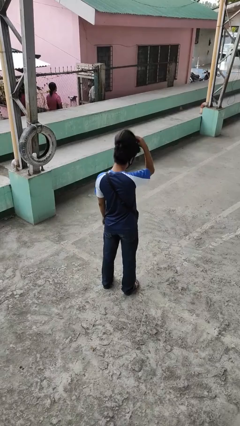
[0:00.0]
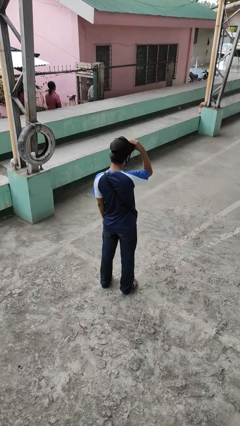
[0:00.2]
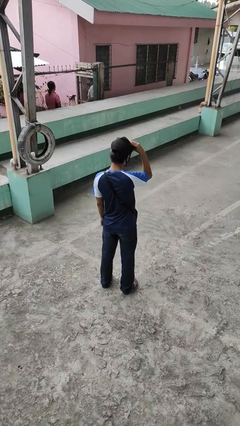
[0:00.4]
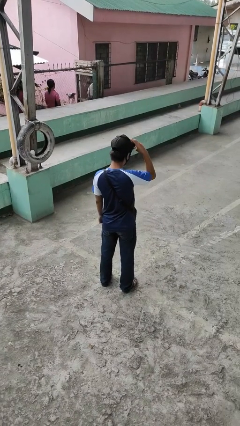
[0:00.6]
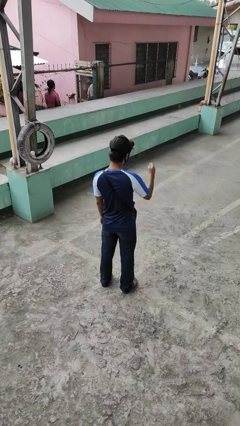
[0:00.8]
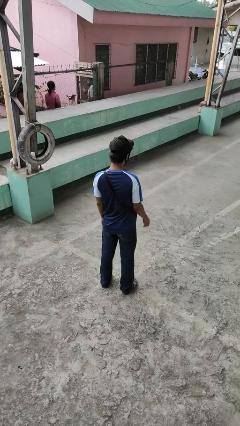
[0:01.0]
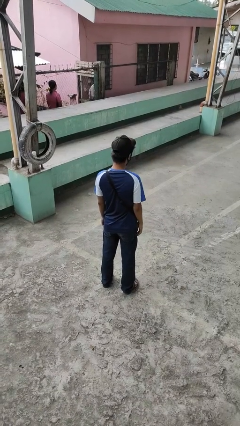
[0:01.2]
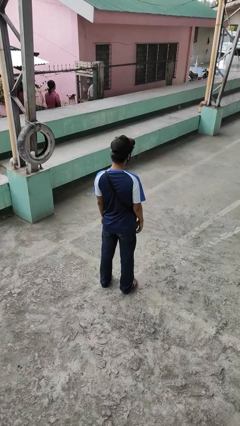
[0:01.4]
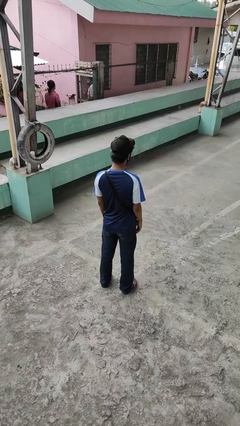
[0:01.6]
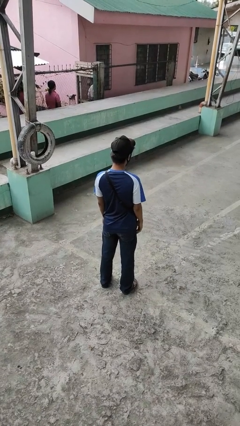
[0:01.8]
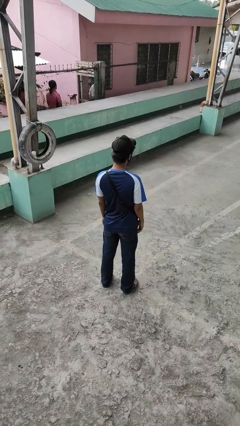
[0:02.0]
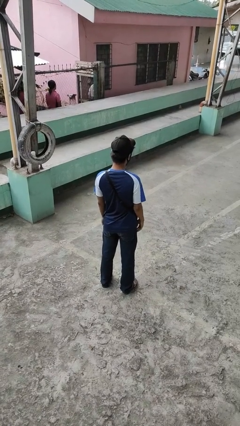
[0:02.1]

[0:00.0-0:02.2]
person puts on hat

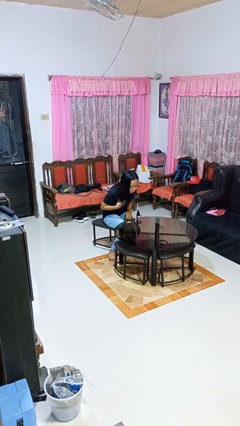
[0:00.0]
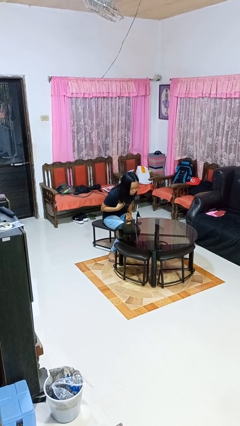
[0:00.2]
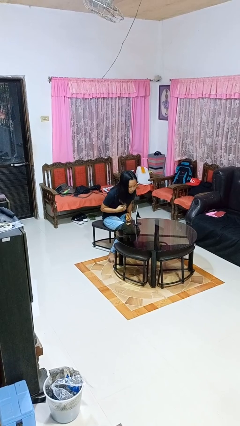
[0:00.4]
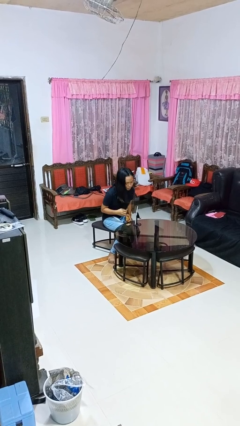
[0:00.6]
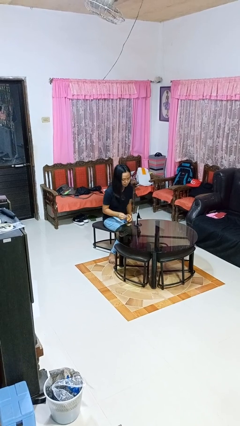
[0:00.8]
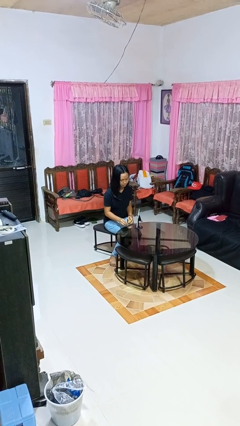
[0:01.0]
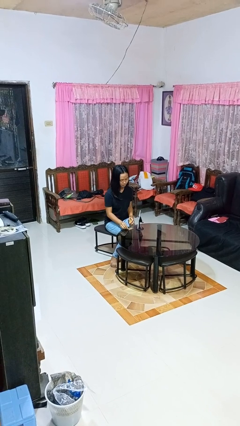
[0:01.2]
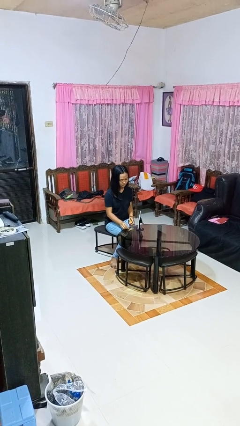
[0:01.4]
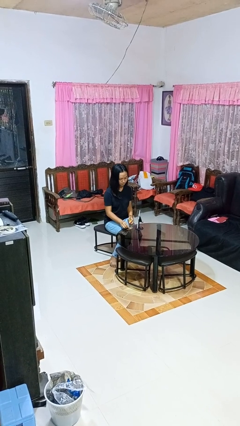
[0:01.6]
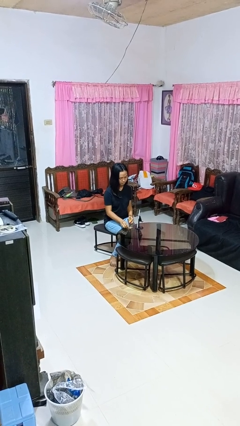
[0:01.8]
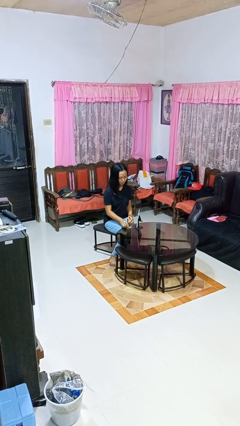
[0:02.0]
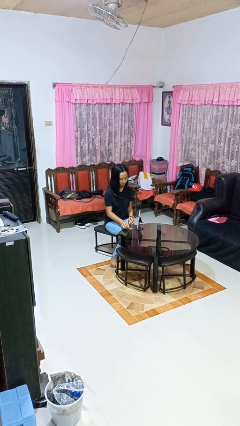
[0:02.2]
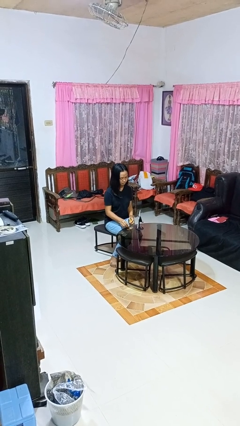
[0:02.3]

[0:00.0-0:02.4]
person extinguishes candle

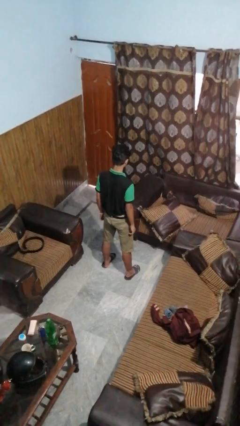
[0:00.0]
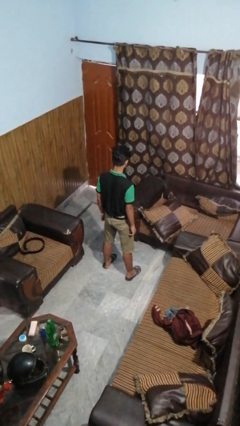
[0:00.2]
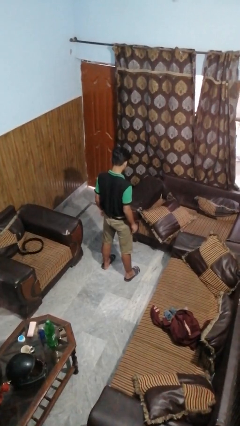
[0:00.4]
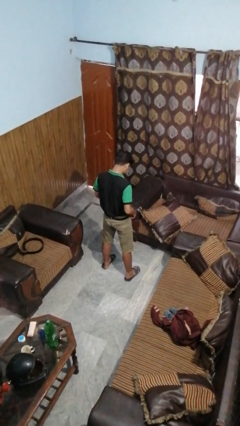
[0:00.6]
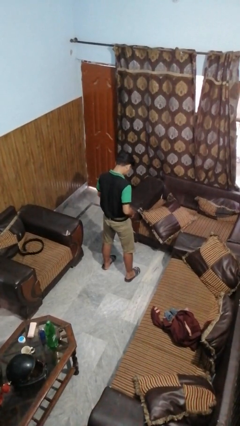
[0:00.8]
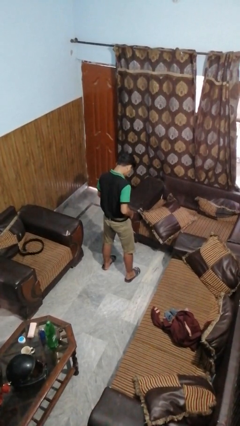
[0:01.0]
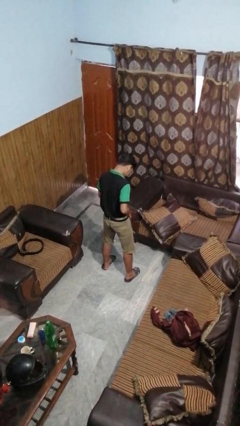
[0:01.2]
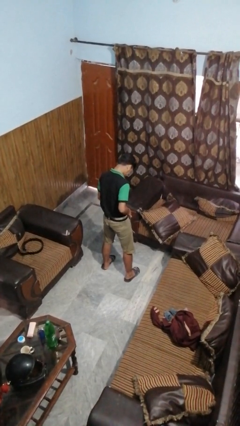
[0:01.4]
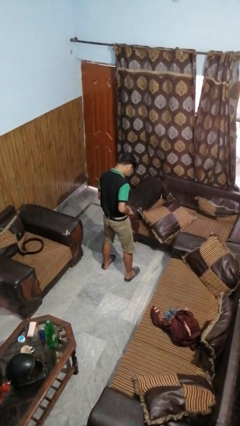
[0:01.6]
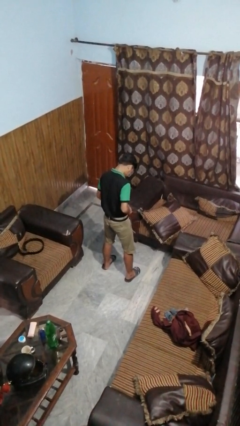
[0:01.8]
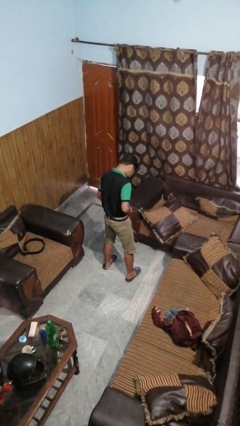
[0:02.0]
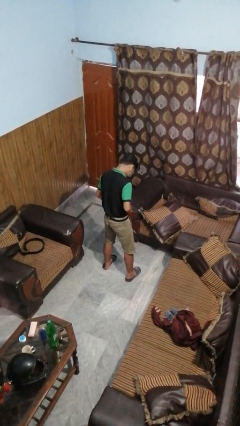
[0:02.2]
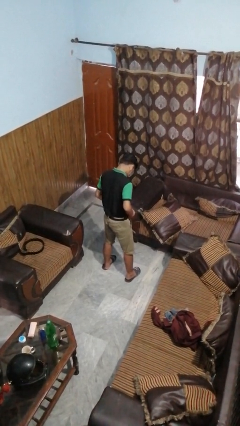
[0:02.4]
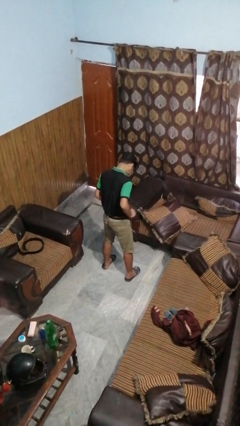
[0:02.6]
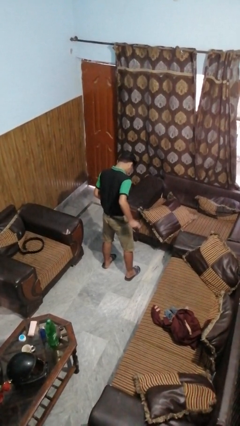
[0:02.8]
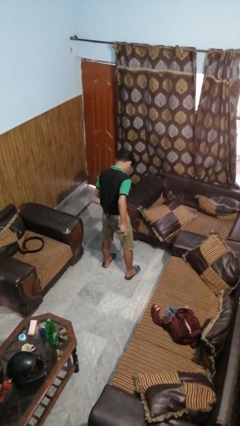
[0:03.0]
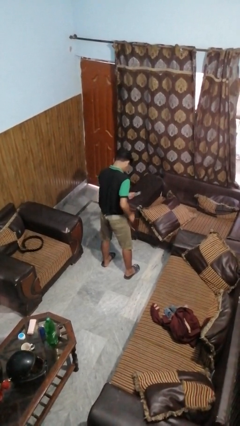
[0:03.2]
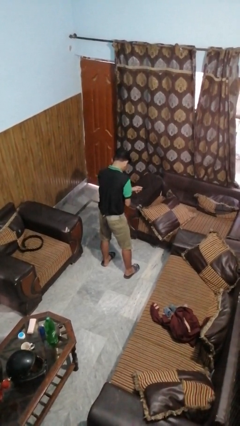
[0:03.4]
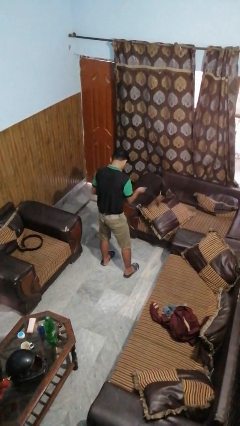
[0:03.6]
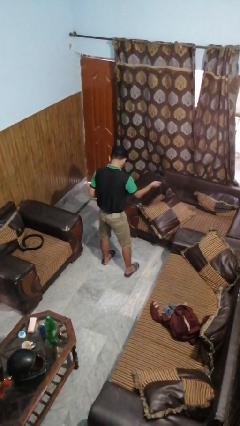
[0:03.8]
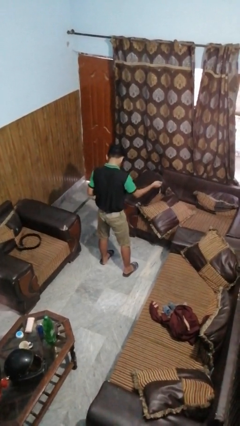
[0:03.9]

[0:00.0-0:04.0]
person takes off belt

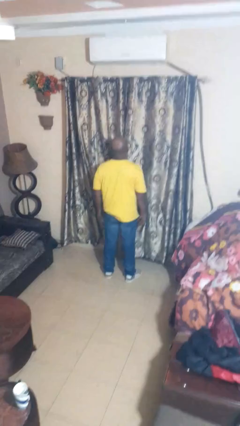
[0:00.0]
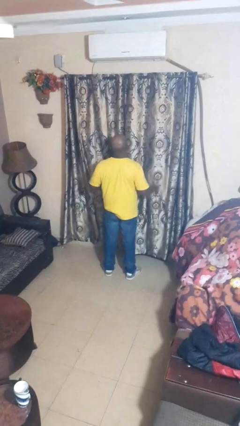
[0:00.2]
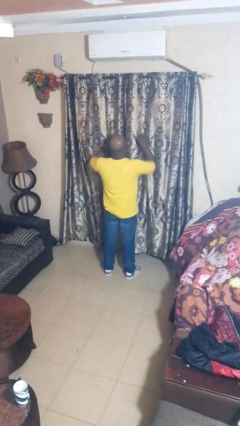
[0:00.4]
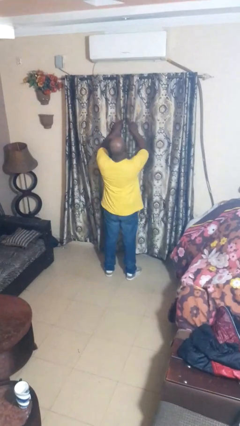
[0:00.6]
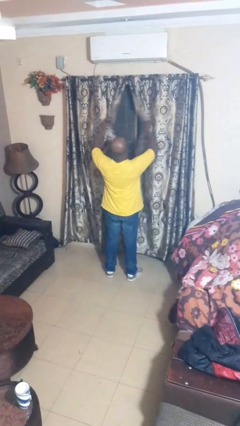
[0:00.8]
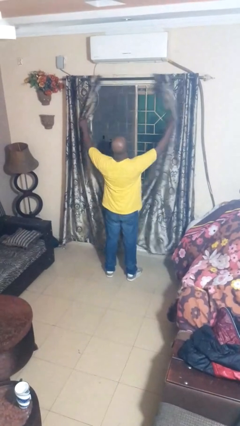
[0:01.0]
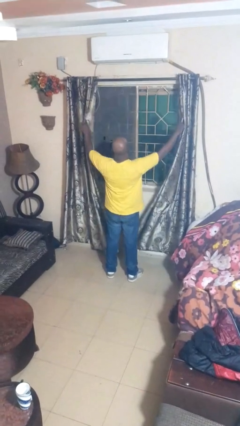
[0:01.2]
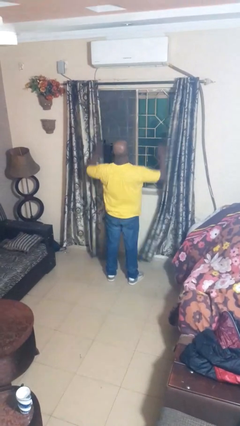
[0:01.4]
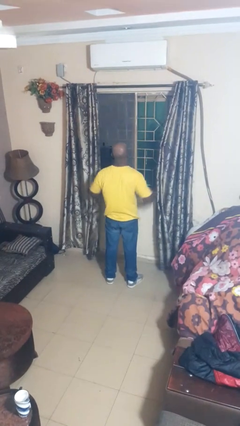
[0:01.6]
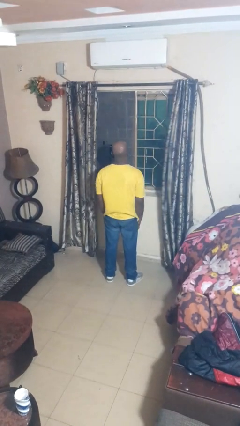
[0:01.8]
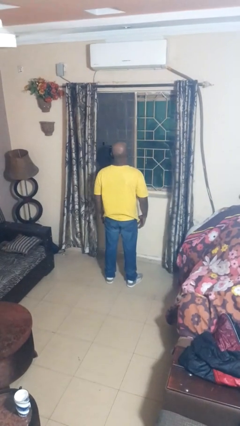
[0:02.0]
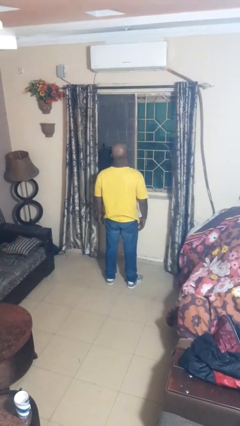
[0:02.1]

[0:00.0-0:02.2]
person opens curtains

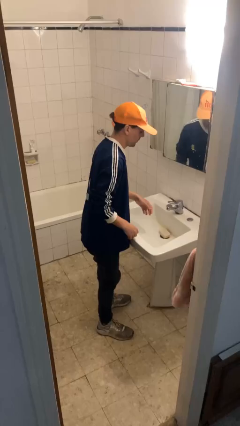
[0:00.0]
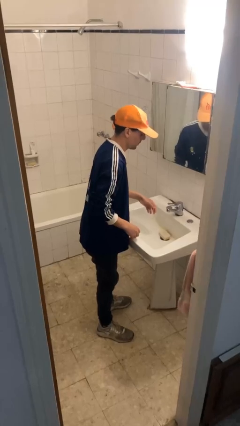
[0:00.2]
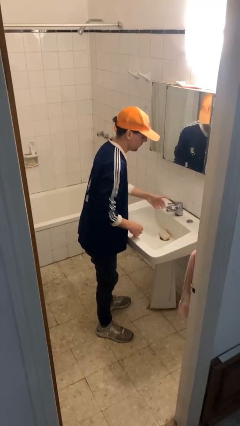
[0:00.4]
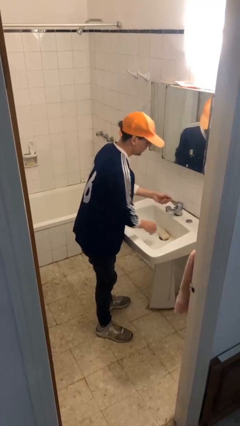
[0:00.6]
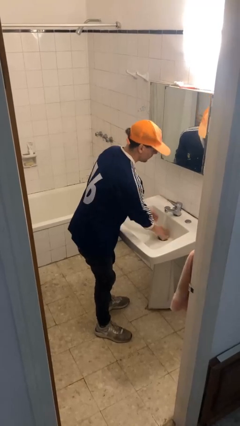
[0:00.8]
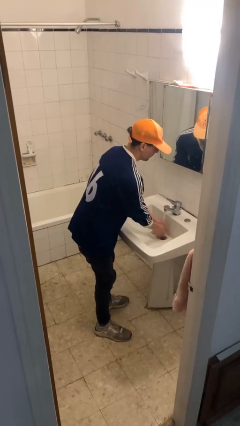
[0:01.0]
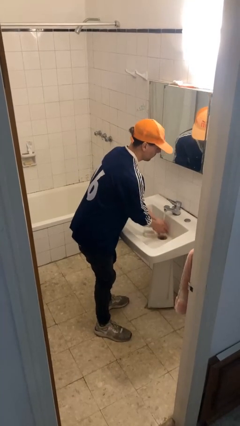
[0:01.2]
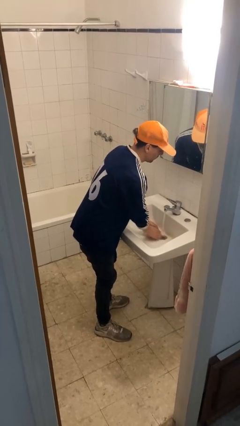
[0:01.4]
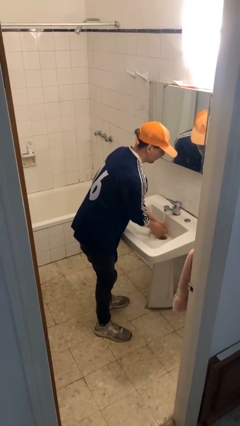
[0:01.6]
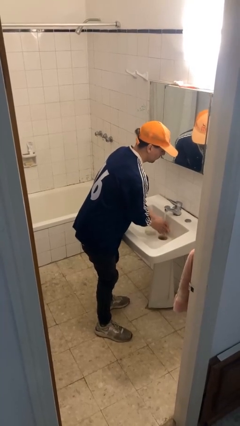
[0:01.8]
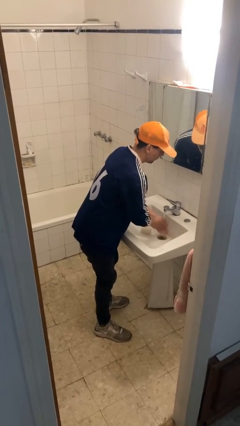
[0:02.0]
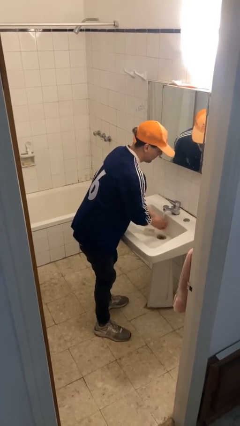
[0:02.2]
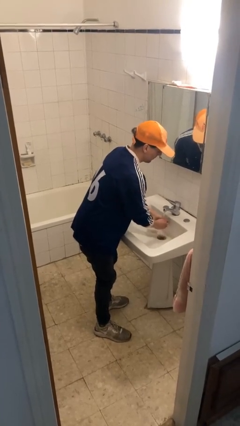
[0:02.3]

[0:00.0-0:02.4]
person washes hands

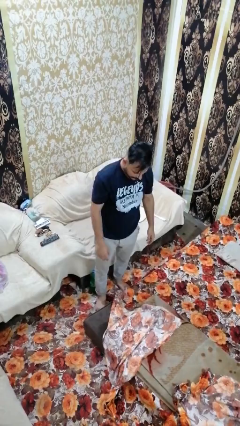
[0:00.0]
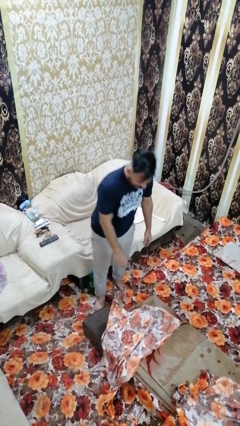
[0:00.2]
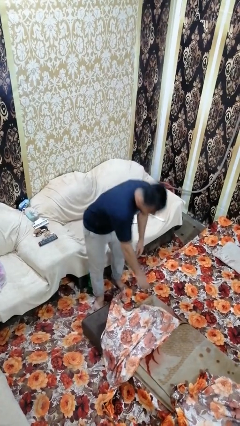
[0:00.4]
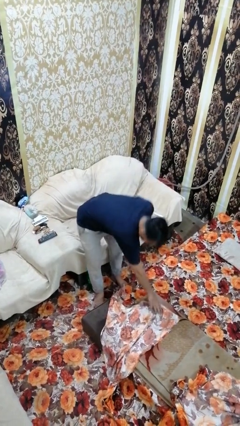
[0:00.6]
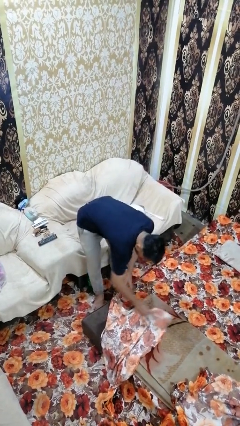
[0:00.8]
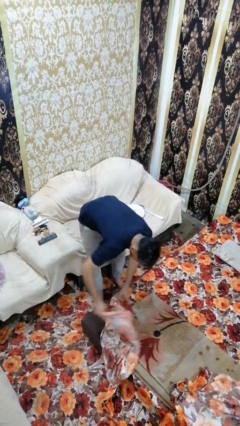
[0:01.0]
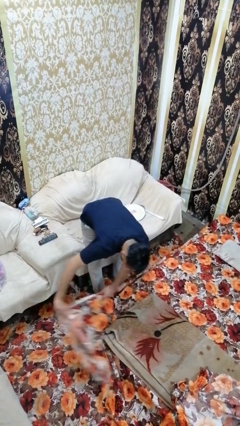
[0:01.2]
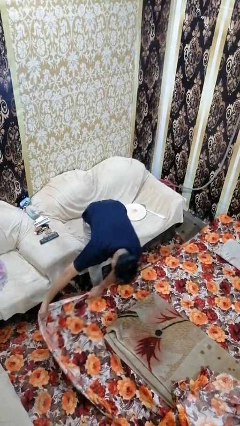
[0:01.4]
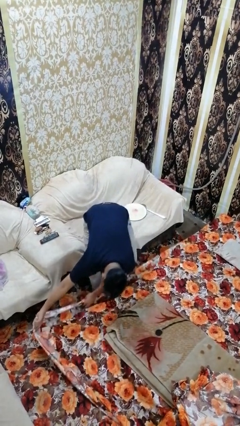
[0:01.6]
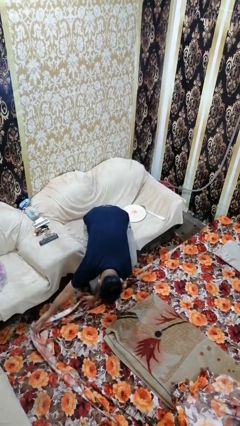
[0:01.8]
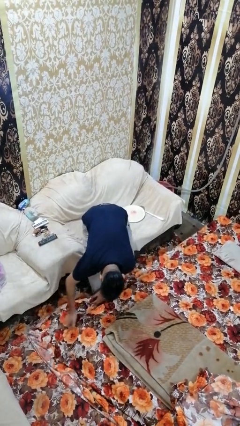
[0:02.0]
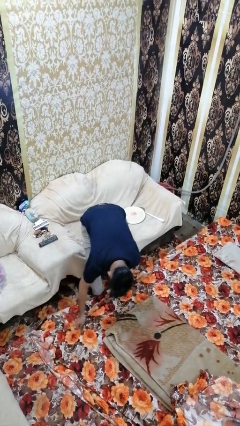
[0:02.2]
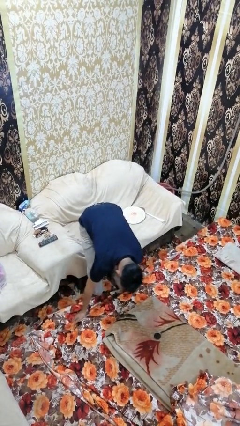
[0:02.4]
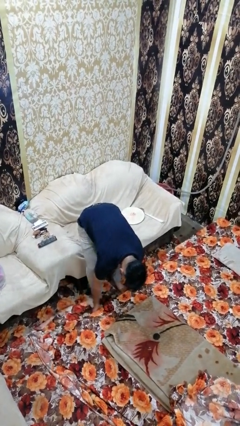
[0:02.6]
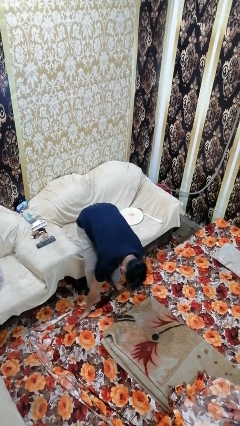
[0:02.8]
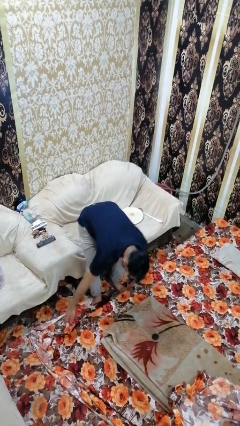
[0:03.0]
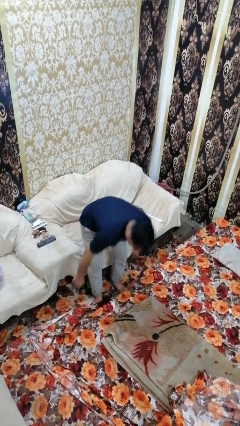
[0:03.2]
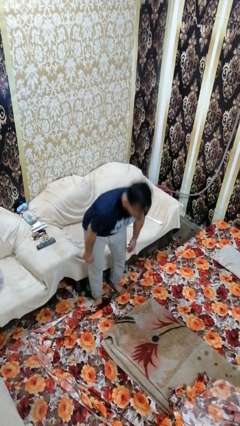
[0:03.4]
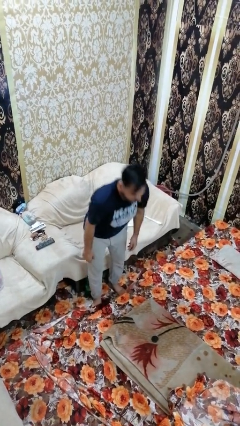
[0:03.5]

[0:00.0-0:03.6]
person makes bed

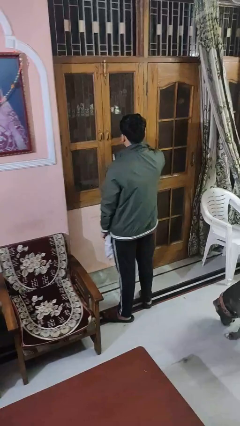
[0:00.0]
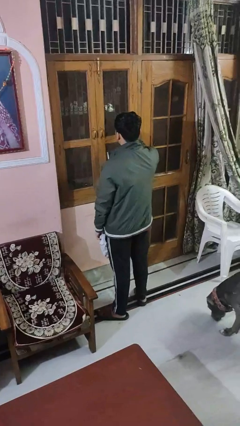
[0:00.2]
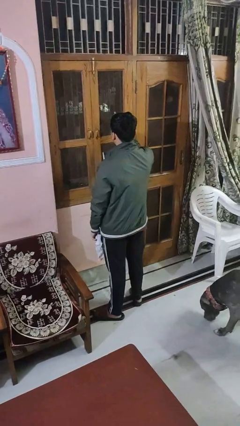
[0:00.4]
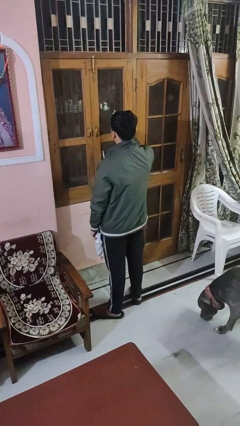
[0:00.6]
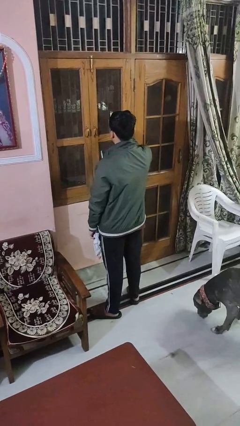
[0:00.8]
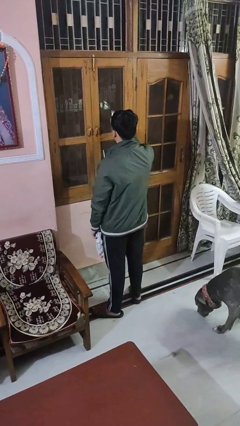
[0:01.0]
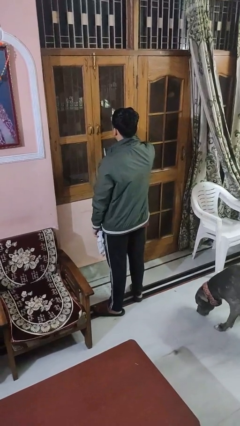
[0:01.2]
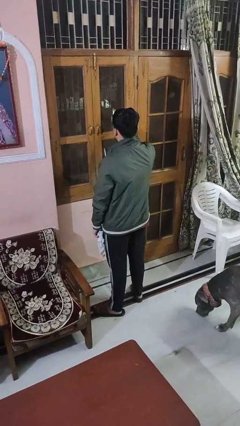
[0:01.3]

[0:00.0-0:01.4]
person sprays from bottle
